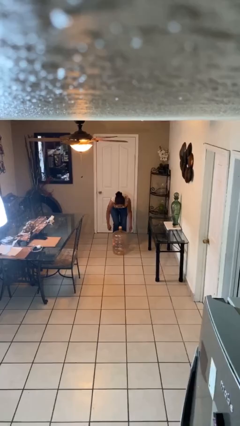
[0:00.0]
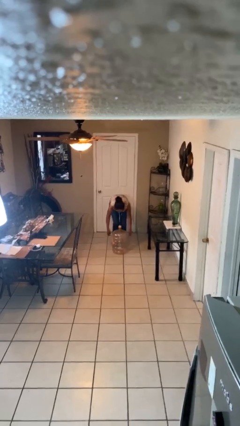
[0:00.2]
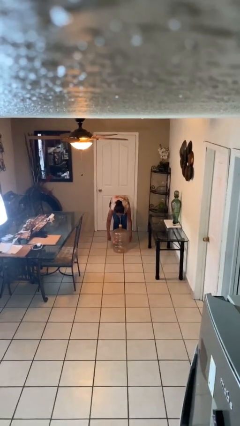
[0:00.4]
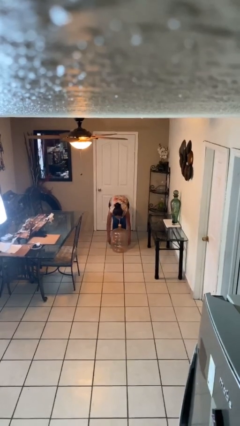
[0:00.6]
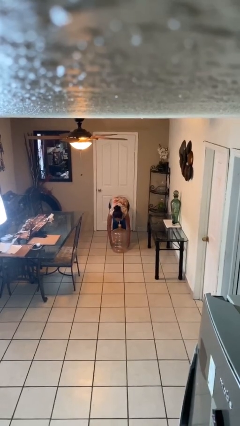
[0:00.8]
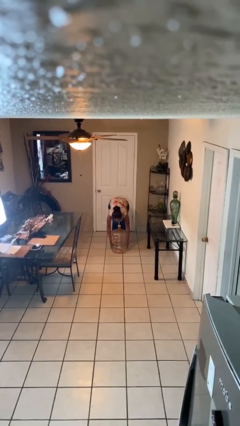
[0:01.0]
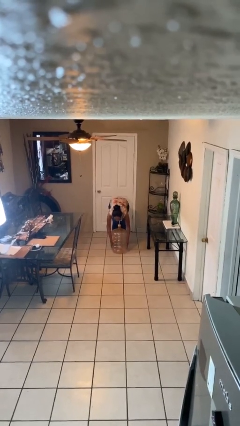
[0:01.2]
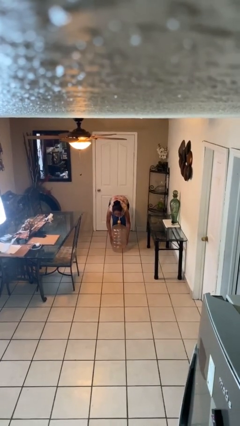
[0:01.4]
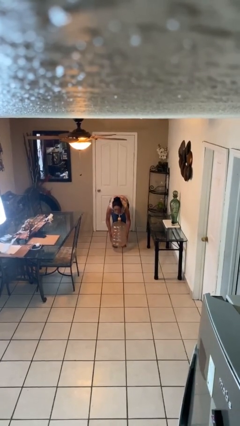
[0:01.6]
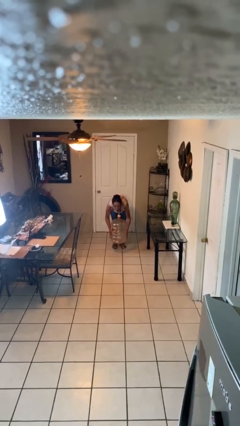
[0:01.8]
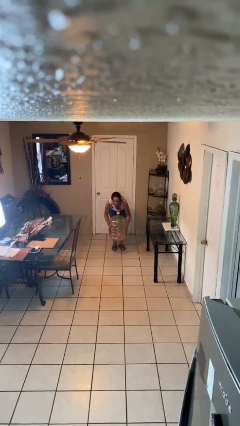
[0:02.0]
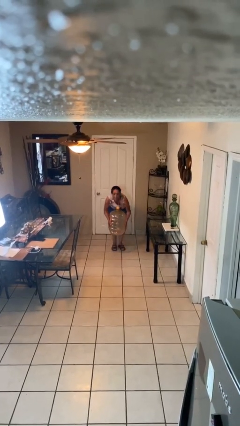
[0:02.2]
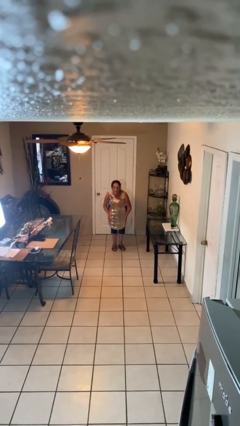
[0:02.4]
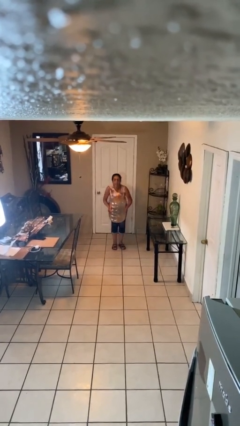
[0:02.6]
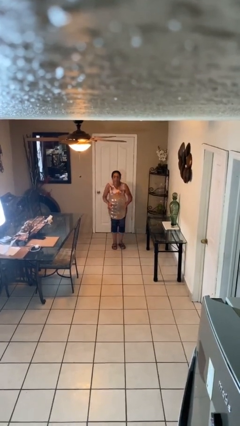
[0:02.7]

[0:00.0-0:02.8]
person picks up object from floor

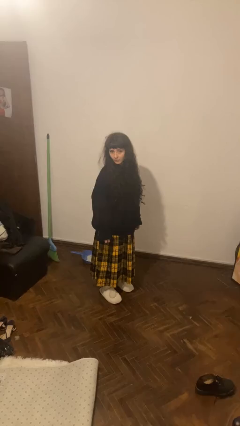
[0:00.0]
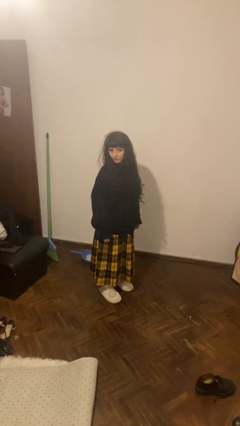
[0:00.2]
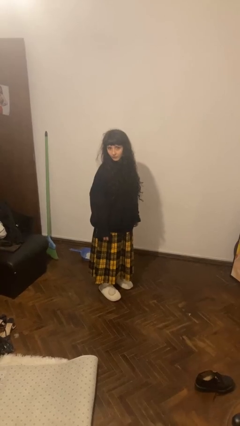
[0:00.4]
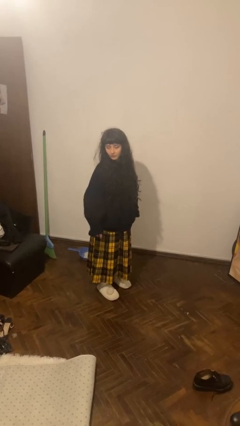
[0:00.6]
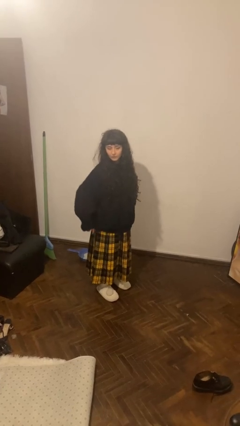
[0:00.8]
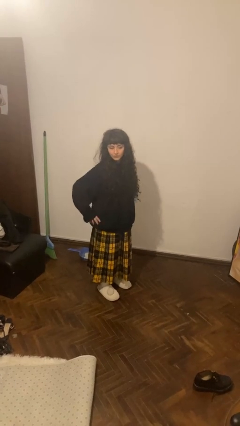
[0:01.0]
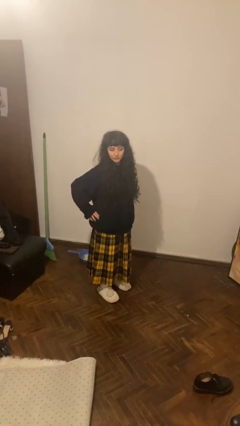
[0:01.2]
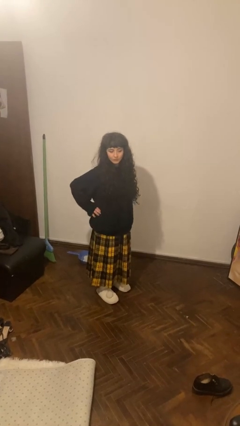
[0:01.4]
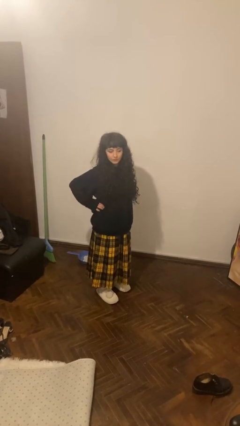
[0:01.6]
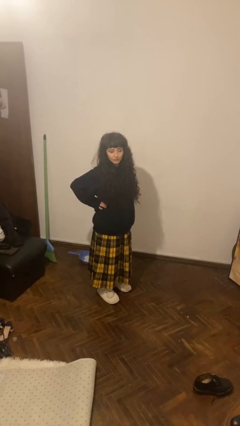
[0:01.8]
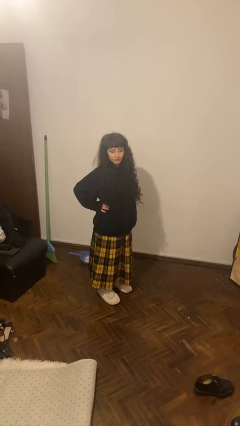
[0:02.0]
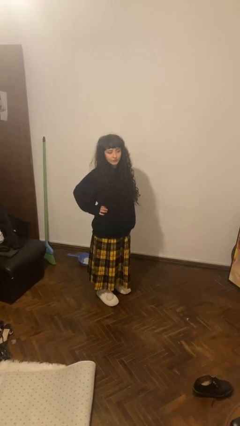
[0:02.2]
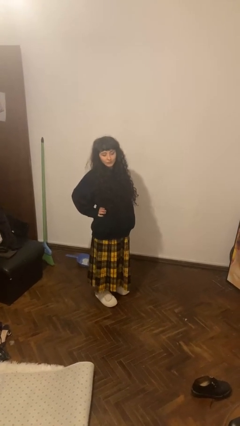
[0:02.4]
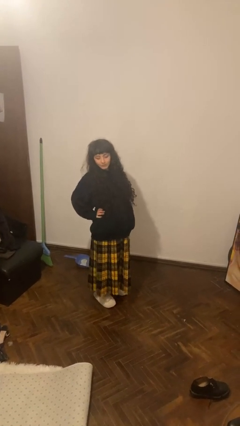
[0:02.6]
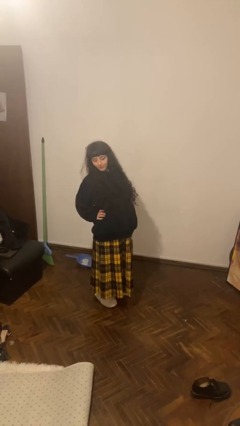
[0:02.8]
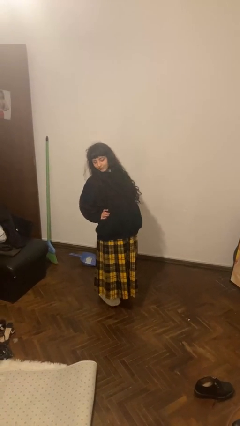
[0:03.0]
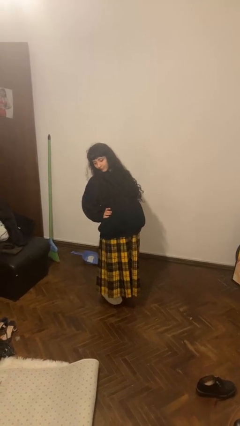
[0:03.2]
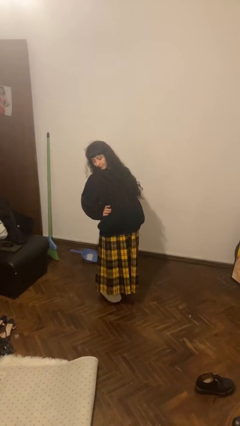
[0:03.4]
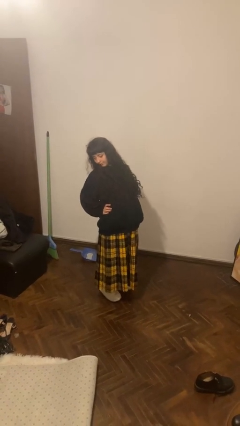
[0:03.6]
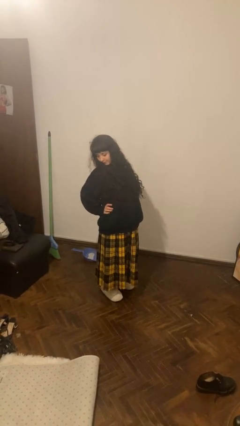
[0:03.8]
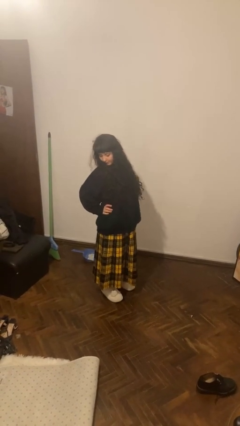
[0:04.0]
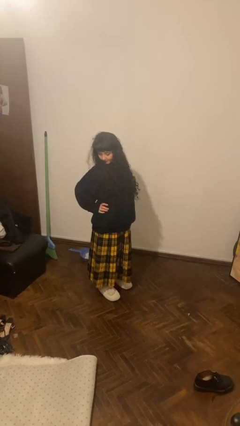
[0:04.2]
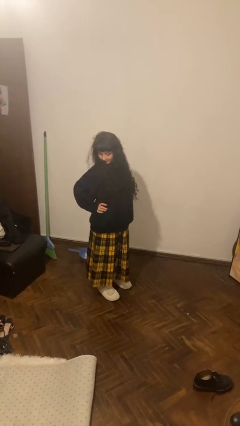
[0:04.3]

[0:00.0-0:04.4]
person stretches back

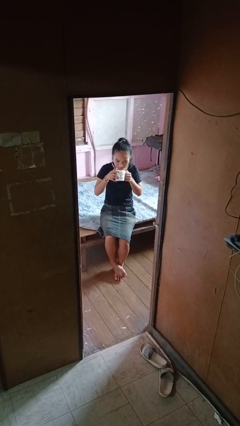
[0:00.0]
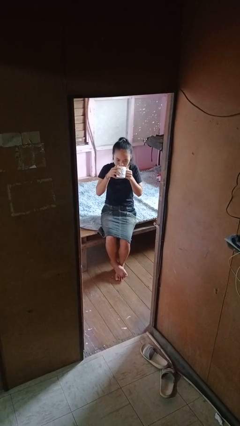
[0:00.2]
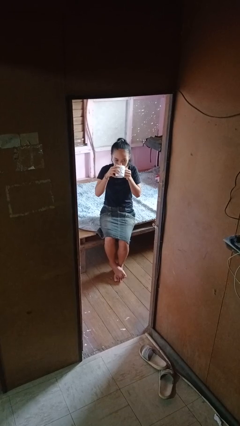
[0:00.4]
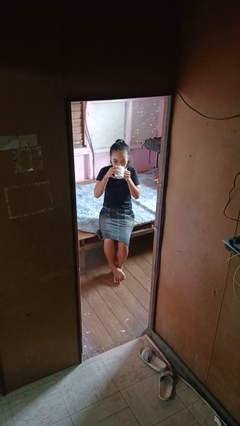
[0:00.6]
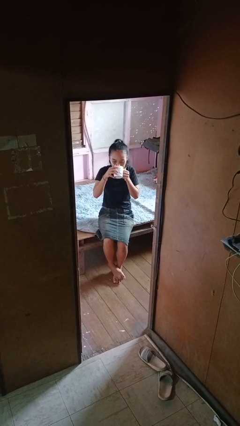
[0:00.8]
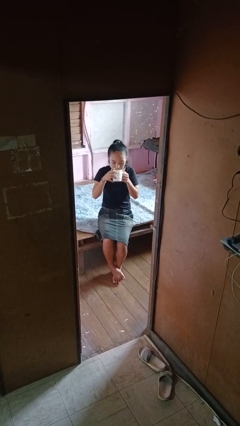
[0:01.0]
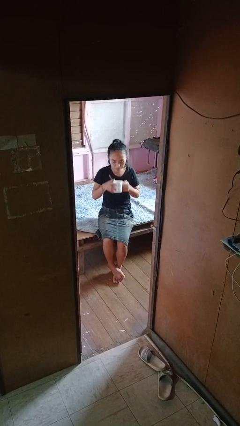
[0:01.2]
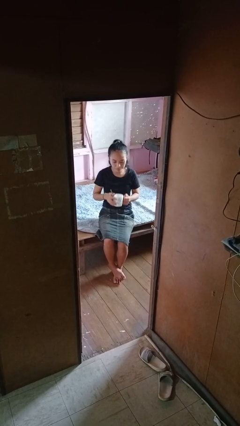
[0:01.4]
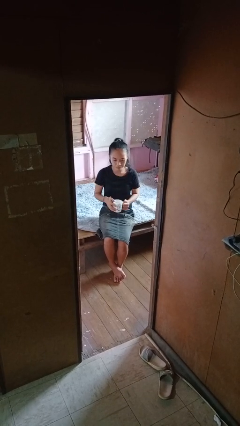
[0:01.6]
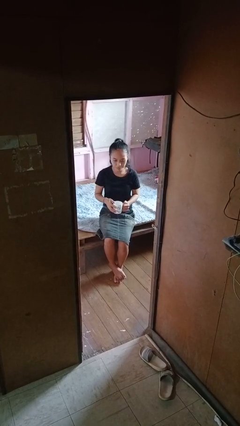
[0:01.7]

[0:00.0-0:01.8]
person drinks from mug

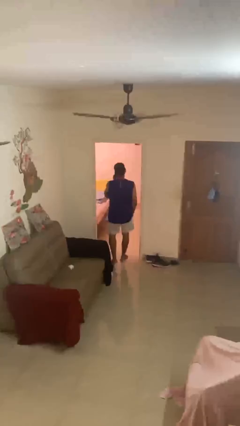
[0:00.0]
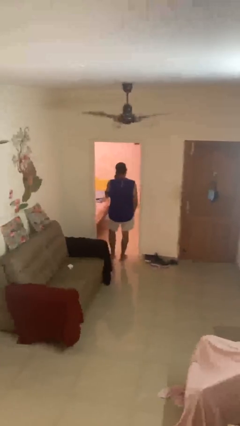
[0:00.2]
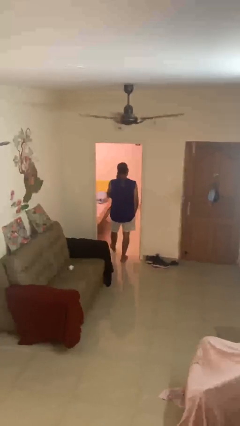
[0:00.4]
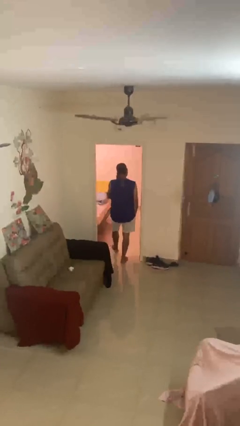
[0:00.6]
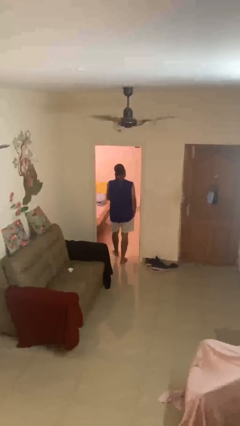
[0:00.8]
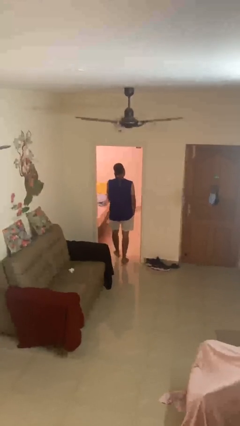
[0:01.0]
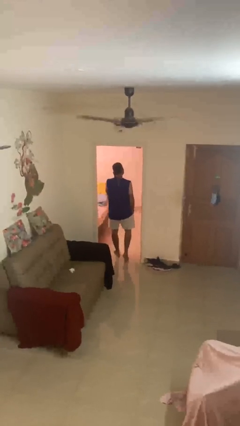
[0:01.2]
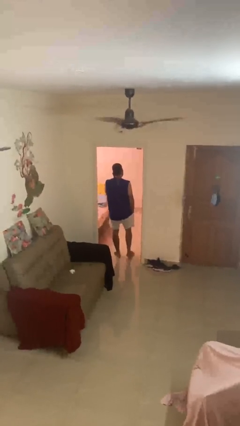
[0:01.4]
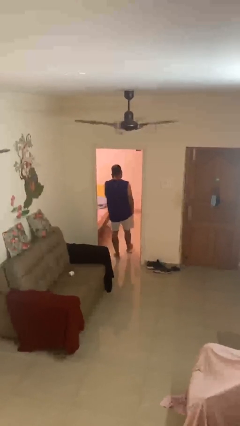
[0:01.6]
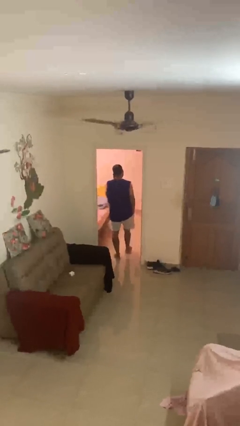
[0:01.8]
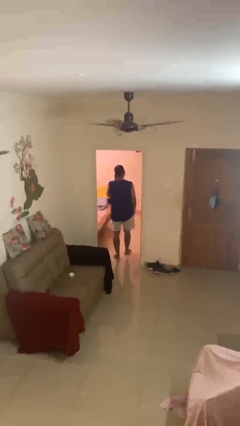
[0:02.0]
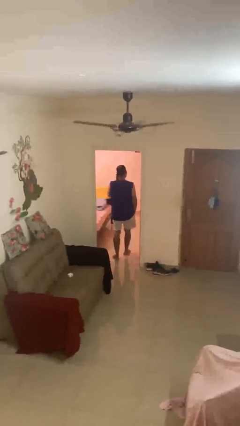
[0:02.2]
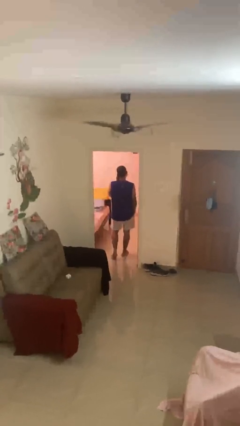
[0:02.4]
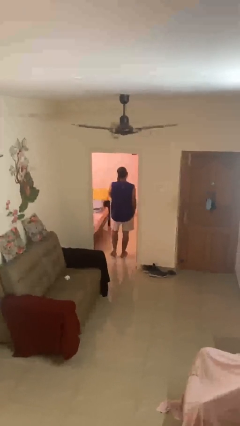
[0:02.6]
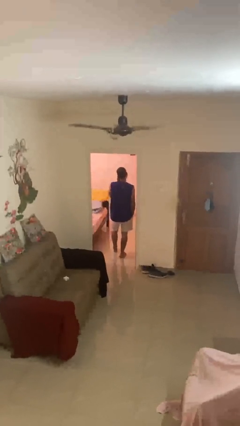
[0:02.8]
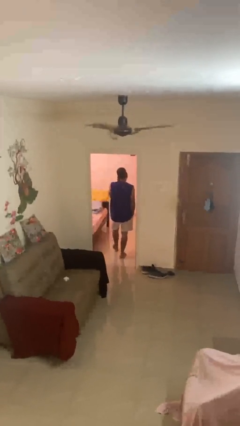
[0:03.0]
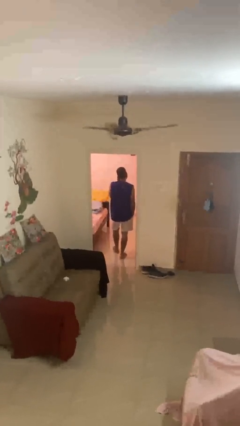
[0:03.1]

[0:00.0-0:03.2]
person exits scene through structure

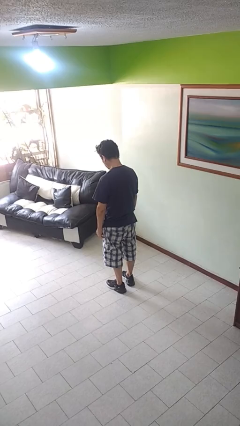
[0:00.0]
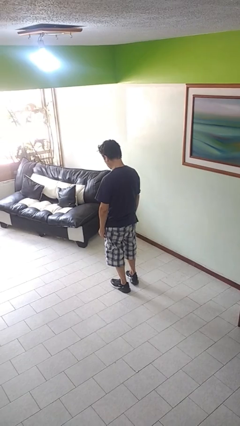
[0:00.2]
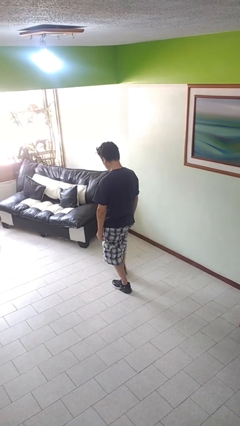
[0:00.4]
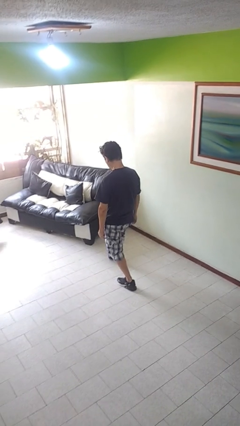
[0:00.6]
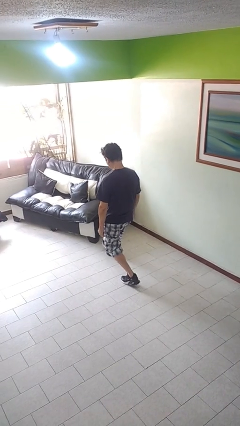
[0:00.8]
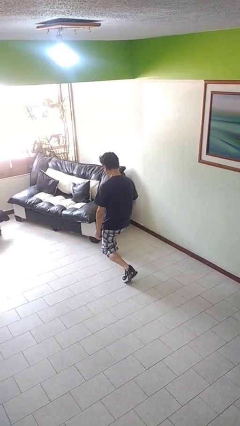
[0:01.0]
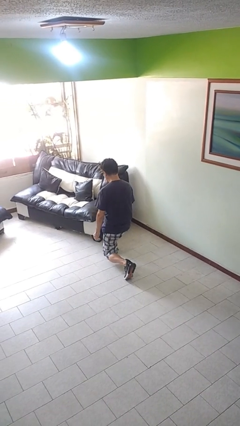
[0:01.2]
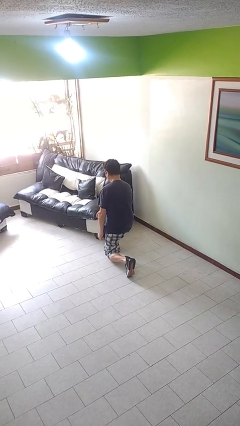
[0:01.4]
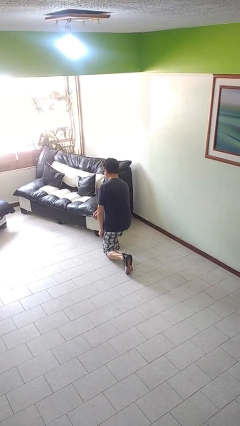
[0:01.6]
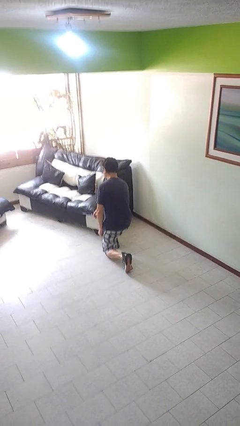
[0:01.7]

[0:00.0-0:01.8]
person kneels

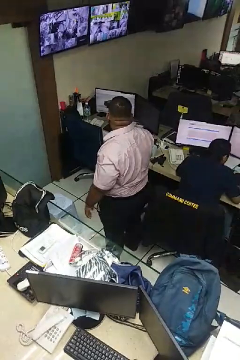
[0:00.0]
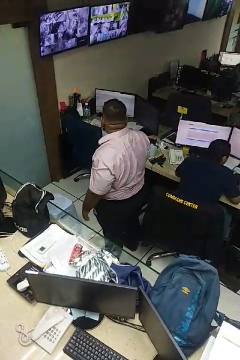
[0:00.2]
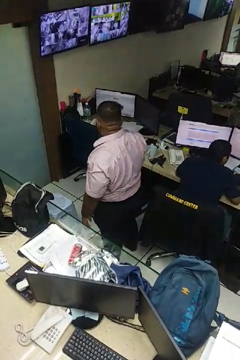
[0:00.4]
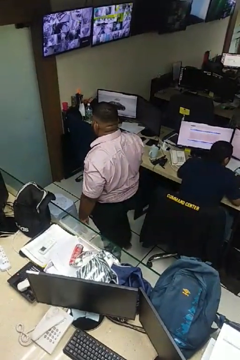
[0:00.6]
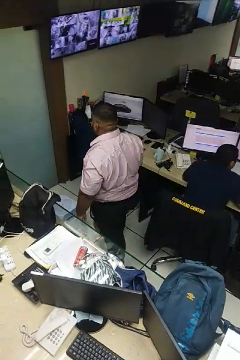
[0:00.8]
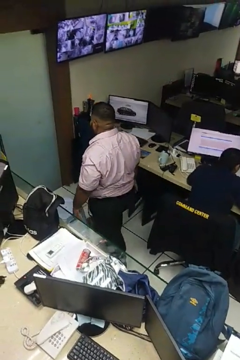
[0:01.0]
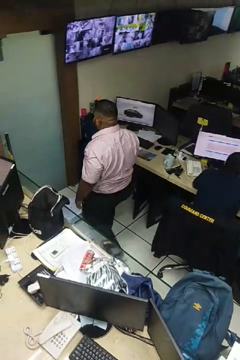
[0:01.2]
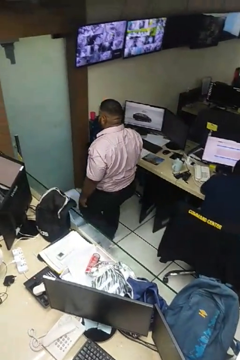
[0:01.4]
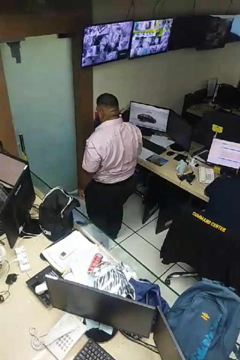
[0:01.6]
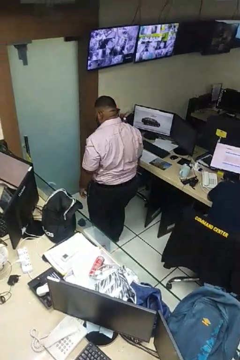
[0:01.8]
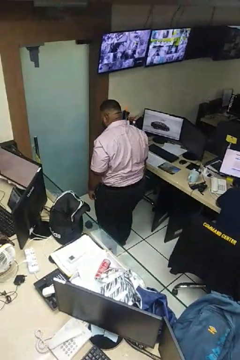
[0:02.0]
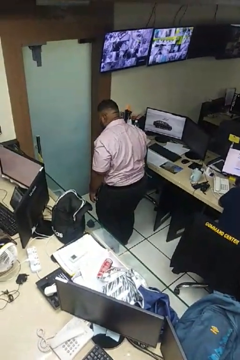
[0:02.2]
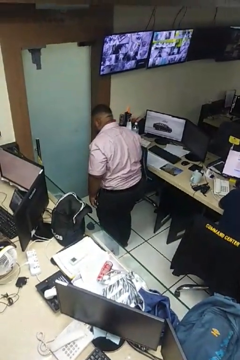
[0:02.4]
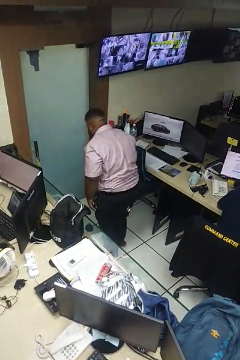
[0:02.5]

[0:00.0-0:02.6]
person knocks over furniture

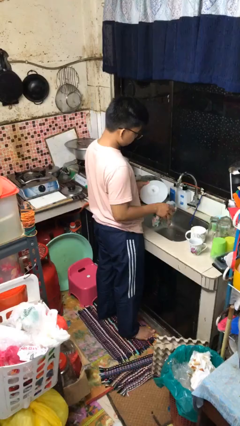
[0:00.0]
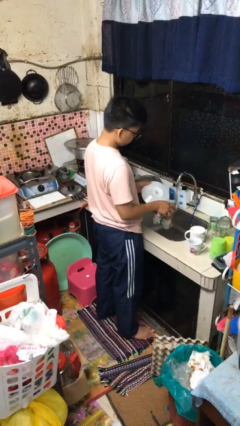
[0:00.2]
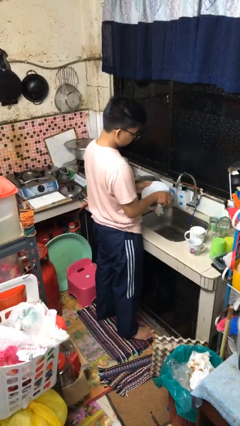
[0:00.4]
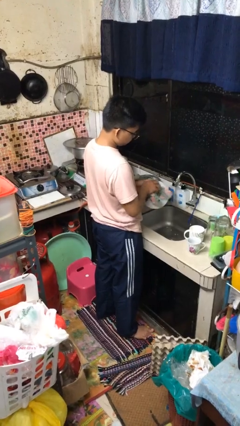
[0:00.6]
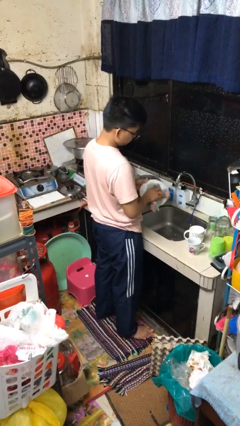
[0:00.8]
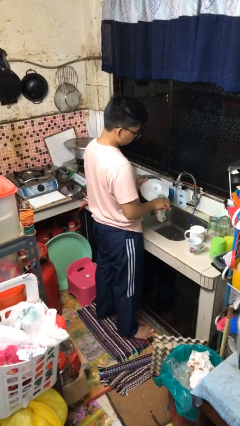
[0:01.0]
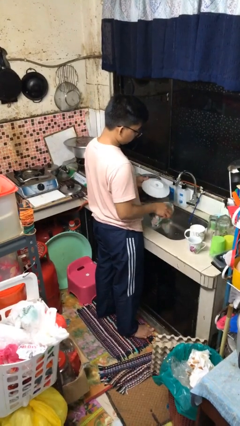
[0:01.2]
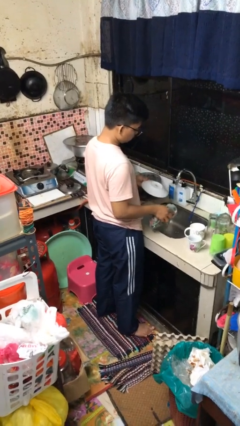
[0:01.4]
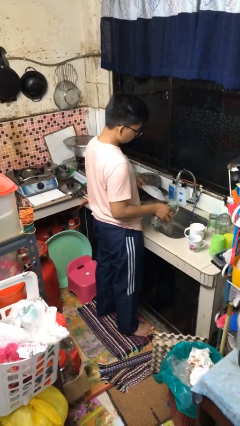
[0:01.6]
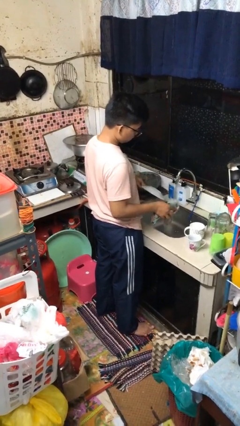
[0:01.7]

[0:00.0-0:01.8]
person dries dish
